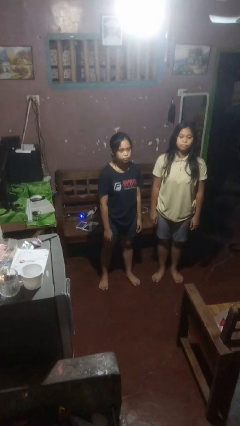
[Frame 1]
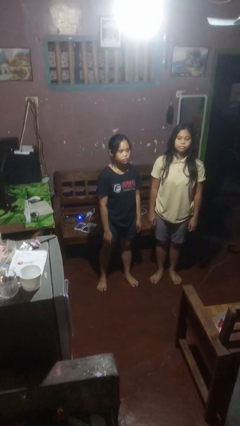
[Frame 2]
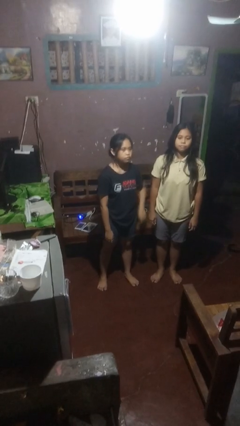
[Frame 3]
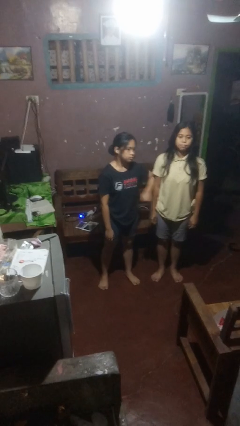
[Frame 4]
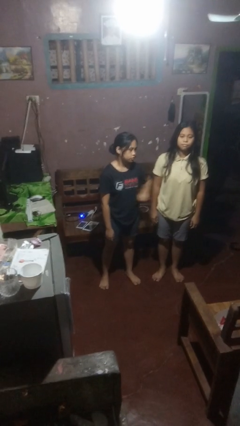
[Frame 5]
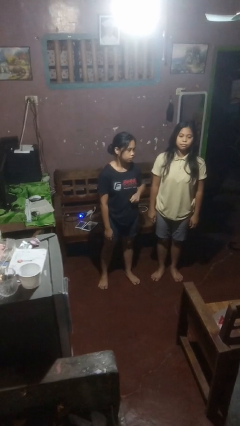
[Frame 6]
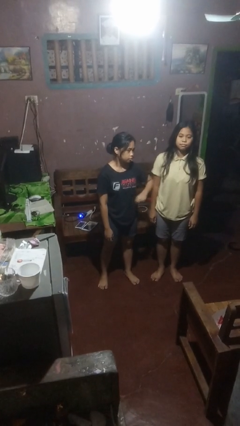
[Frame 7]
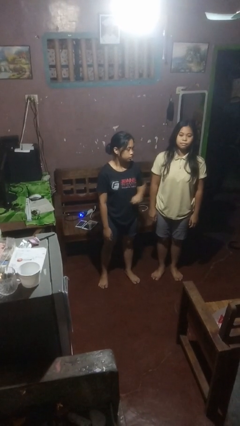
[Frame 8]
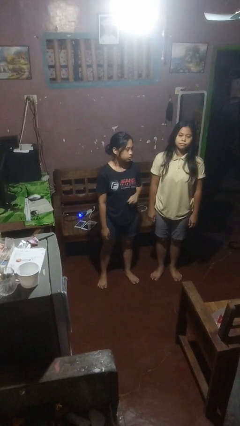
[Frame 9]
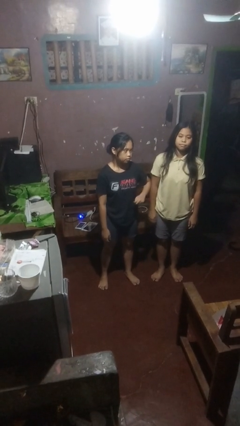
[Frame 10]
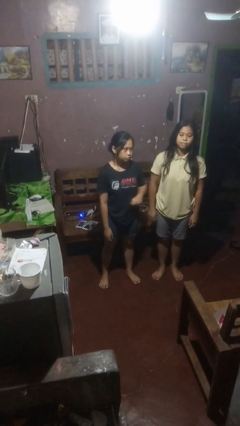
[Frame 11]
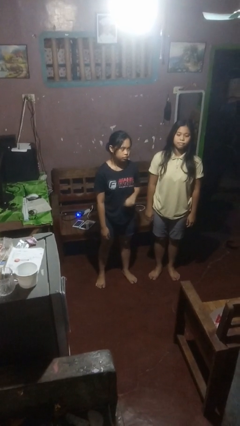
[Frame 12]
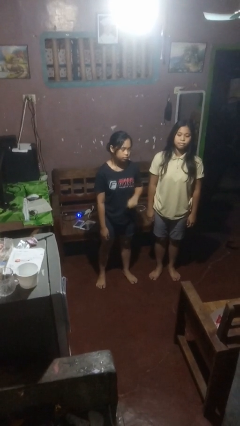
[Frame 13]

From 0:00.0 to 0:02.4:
person nudges person with elbow

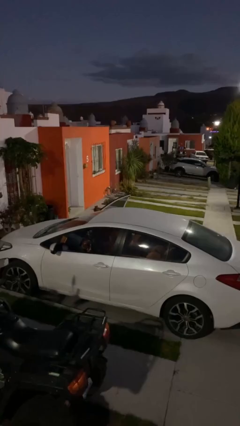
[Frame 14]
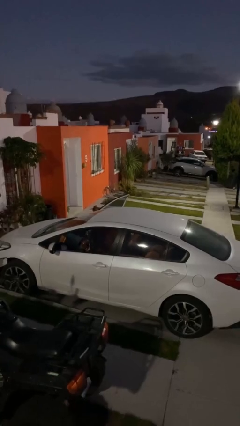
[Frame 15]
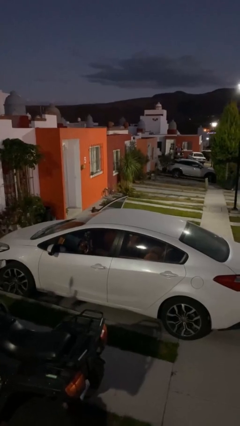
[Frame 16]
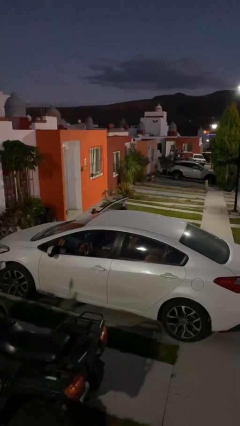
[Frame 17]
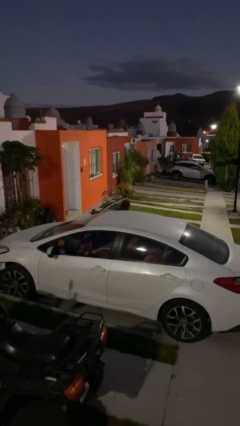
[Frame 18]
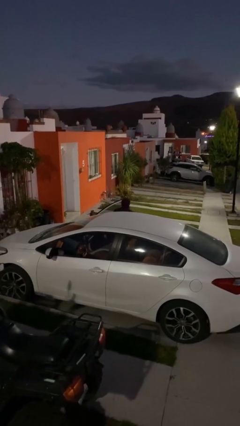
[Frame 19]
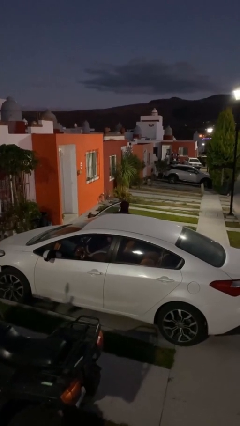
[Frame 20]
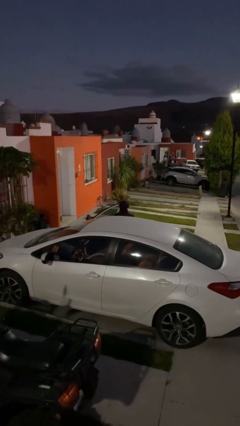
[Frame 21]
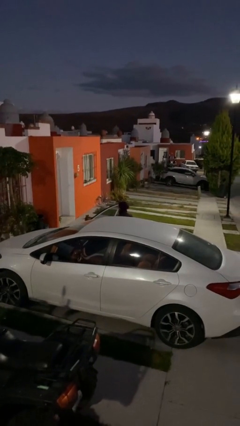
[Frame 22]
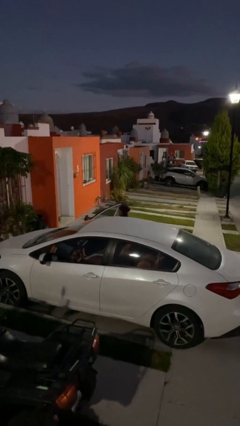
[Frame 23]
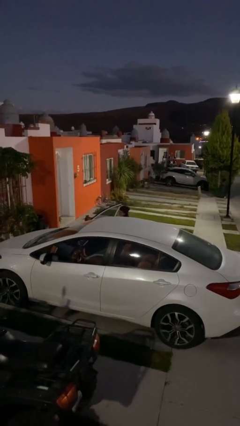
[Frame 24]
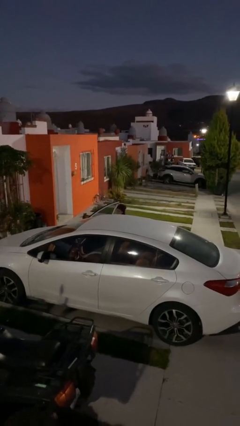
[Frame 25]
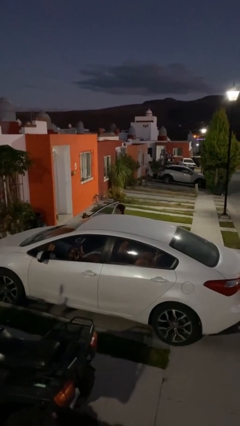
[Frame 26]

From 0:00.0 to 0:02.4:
person exits car

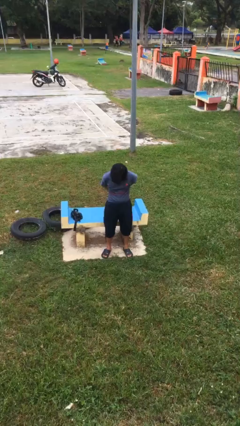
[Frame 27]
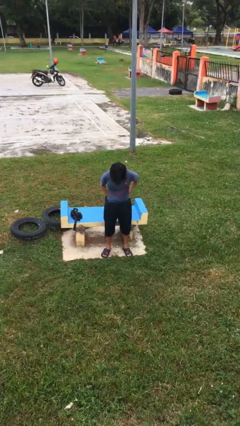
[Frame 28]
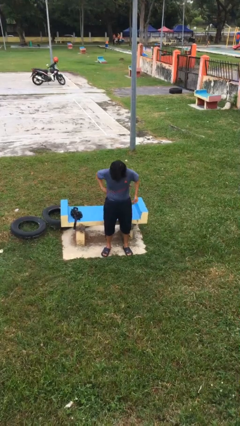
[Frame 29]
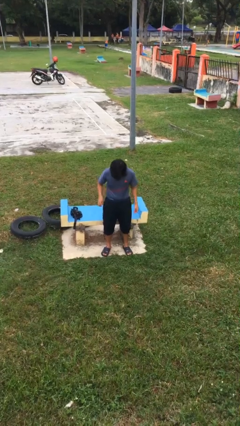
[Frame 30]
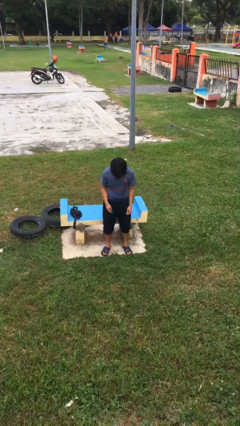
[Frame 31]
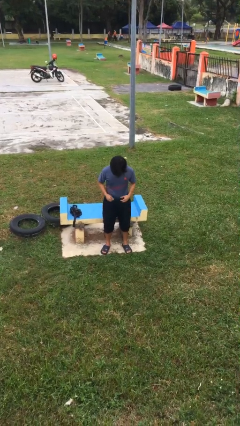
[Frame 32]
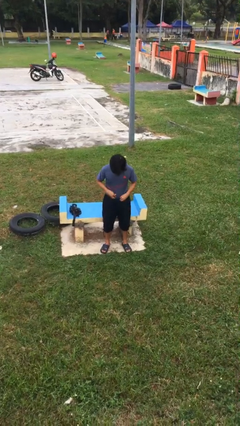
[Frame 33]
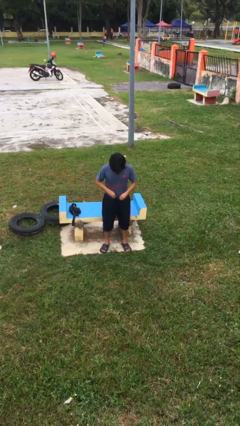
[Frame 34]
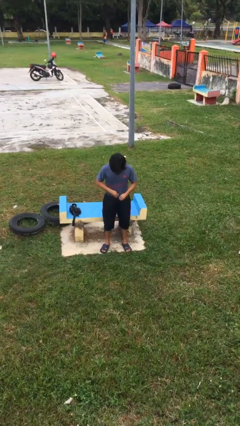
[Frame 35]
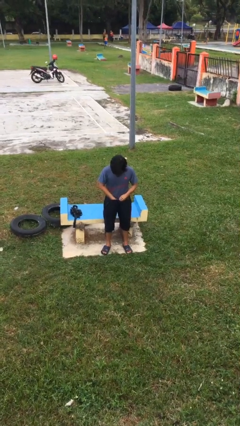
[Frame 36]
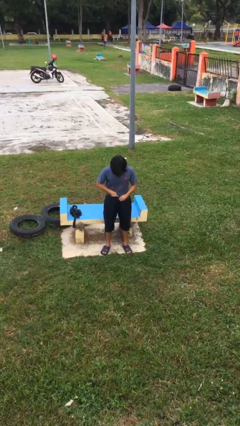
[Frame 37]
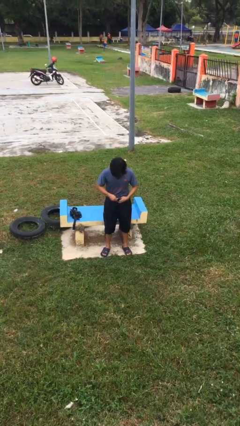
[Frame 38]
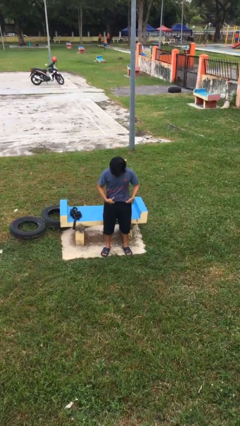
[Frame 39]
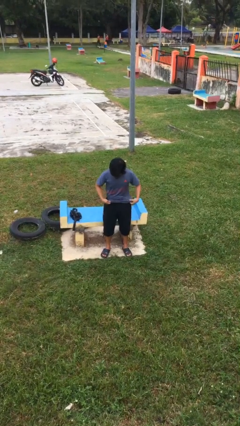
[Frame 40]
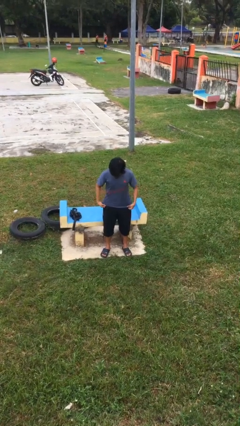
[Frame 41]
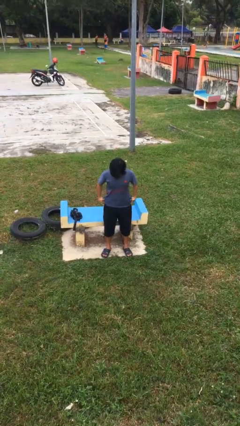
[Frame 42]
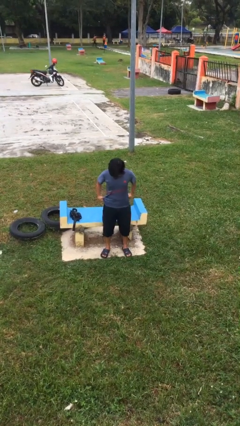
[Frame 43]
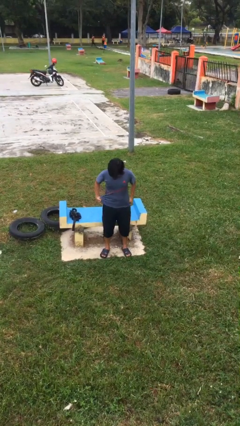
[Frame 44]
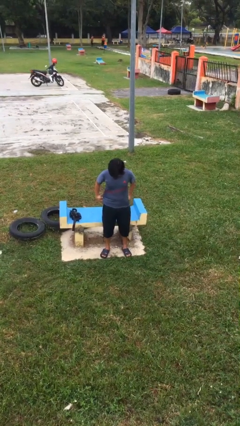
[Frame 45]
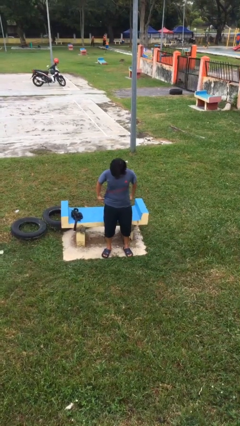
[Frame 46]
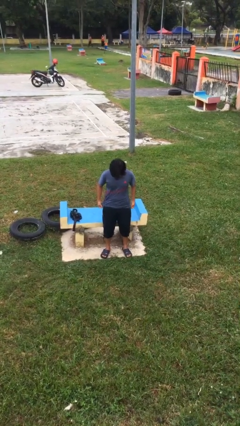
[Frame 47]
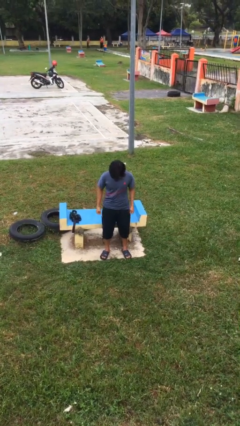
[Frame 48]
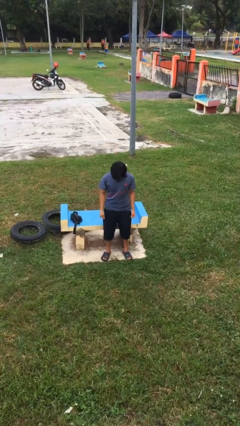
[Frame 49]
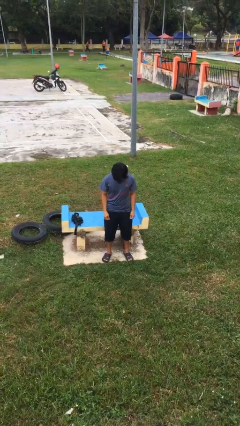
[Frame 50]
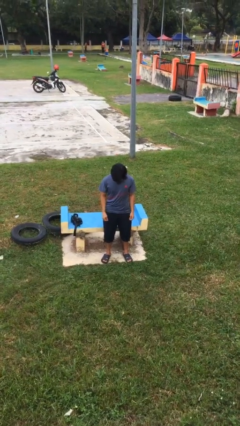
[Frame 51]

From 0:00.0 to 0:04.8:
person untucks shirt

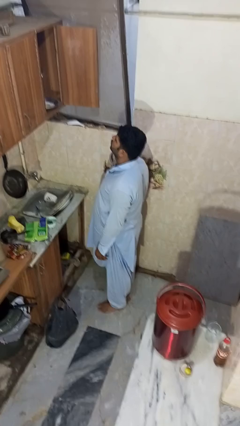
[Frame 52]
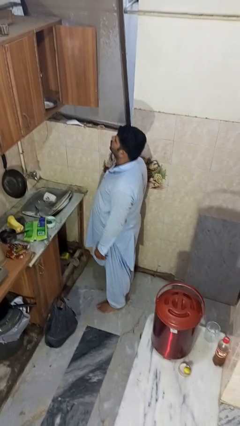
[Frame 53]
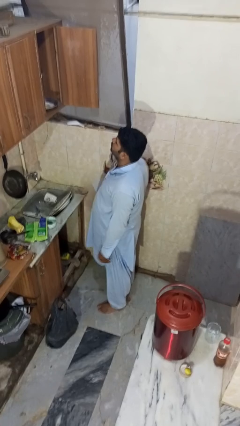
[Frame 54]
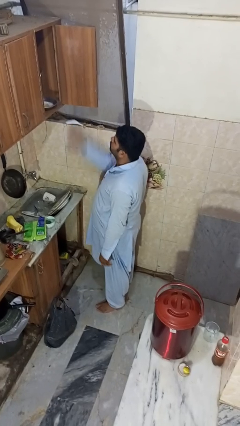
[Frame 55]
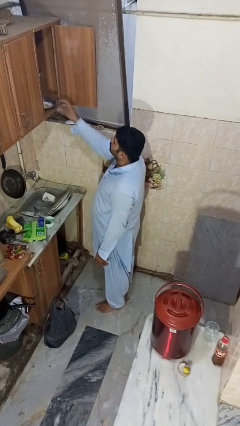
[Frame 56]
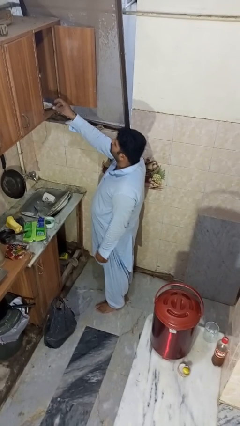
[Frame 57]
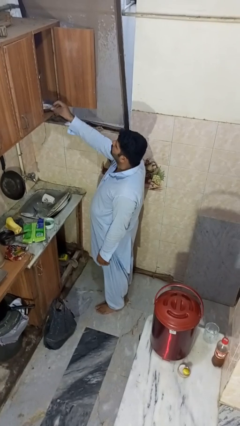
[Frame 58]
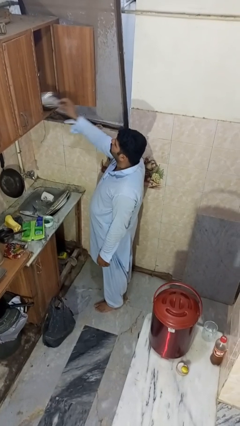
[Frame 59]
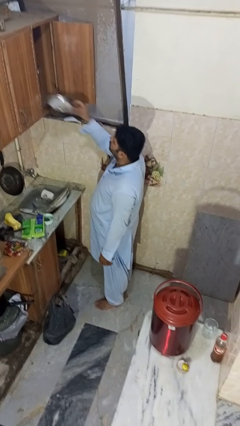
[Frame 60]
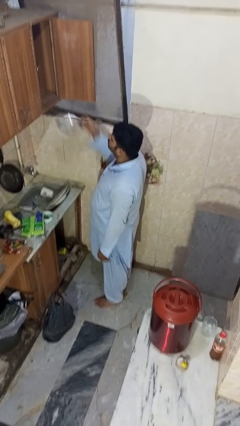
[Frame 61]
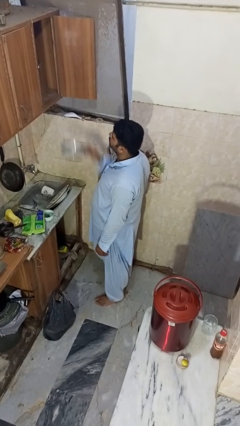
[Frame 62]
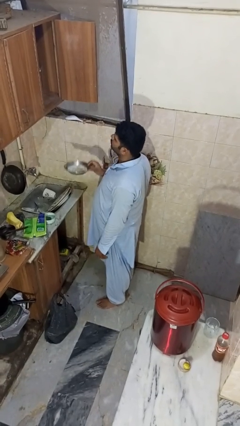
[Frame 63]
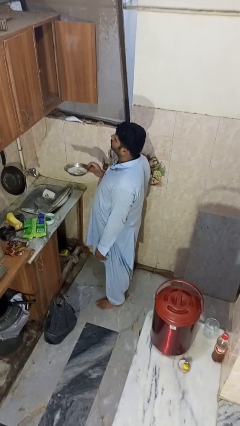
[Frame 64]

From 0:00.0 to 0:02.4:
person takes object from cabinet

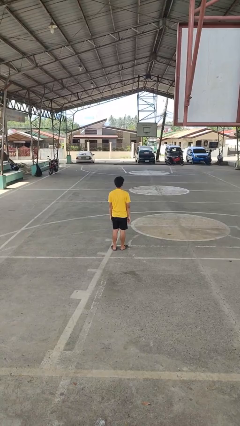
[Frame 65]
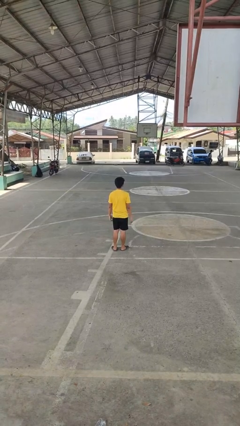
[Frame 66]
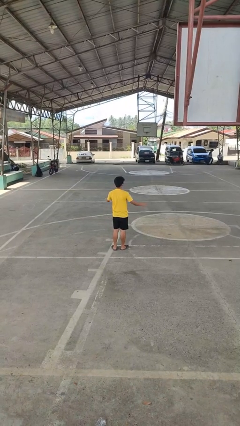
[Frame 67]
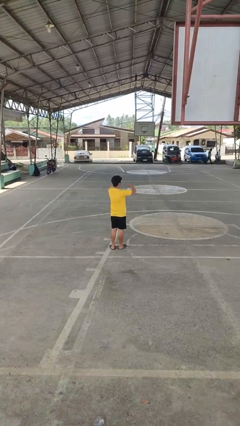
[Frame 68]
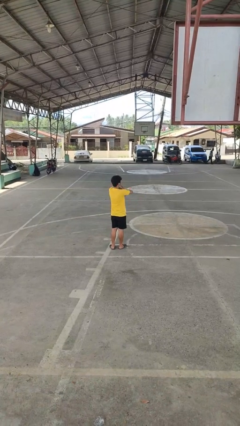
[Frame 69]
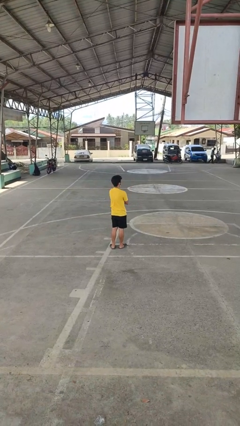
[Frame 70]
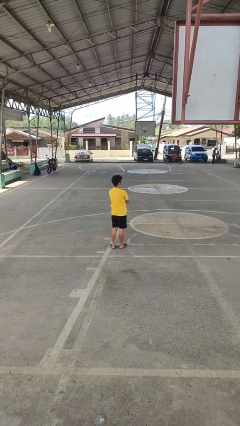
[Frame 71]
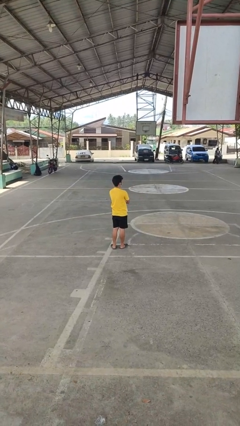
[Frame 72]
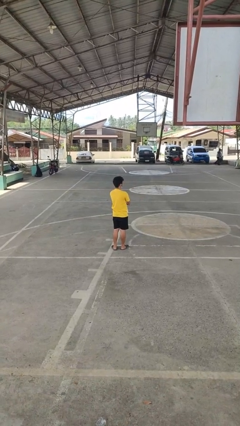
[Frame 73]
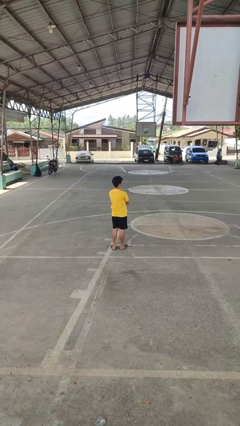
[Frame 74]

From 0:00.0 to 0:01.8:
person crosses arms

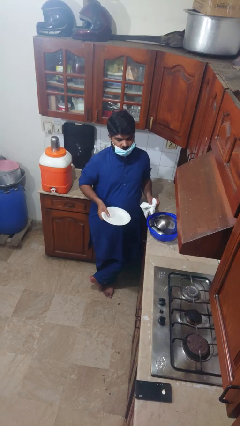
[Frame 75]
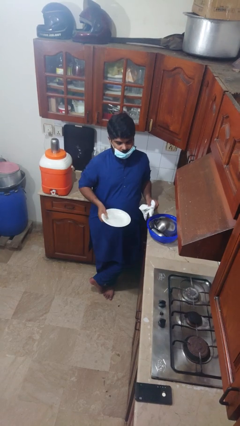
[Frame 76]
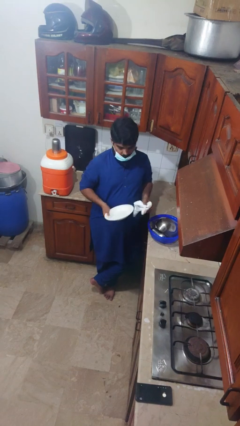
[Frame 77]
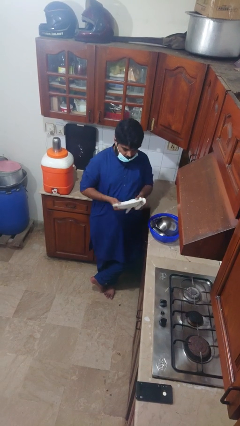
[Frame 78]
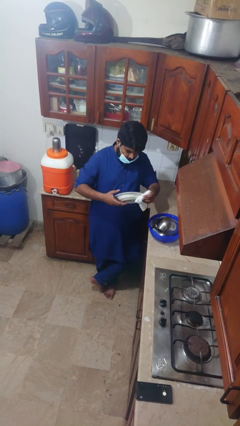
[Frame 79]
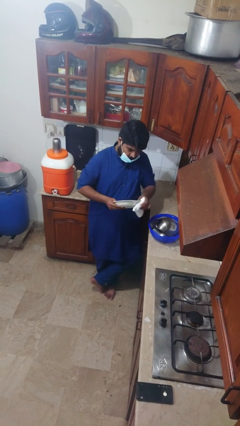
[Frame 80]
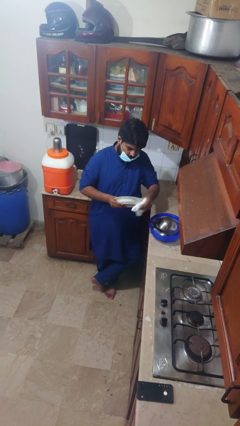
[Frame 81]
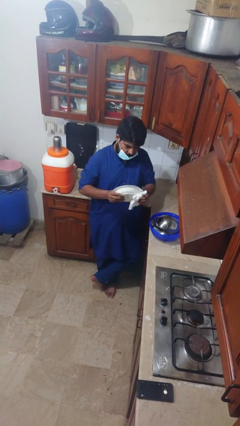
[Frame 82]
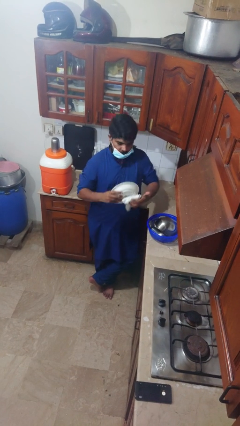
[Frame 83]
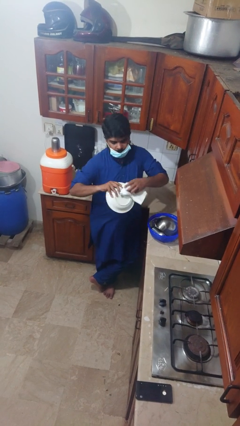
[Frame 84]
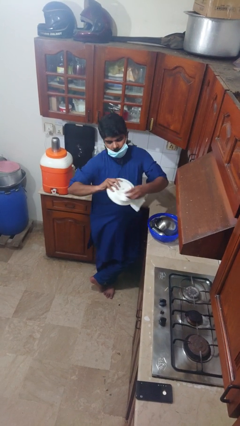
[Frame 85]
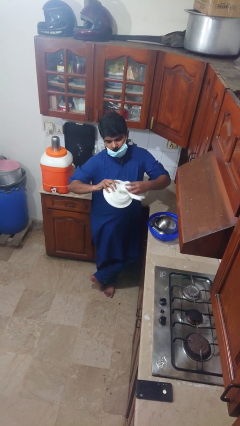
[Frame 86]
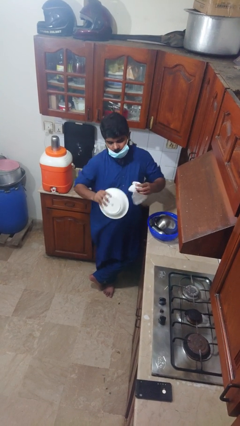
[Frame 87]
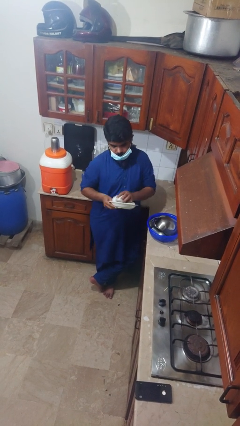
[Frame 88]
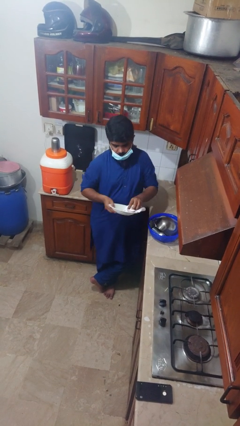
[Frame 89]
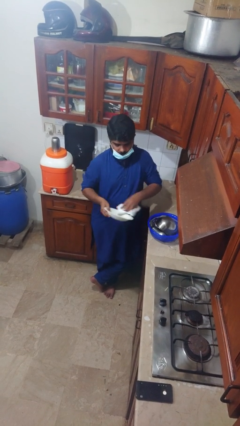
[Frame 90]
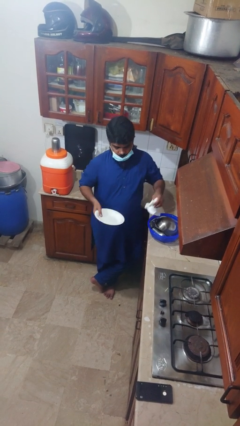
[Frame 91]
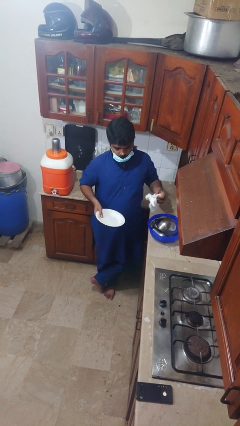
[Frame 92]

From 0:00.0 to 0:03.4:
person dries dish

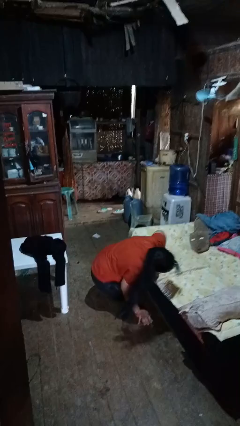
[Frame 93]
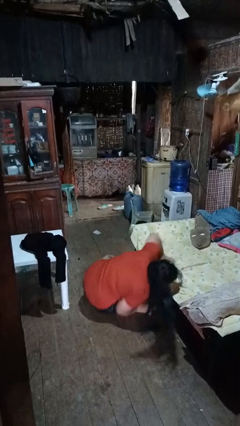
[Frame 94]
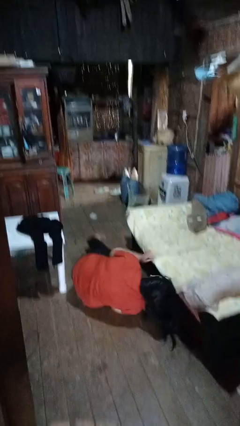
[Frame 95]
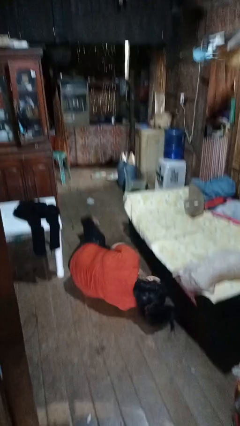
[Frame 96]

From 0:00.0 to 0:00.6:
person trips on object on floor
